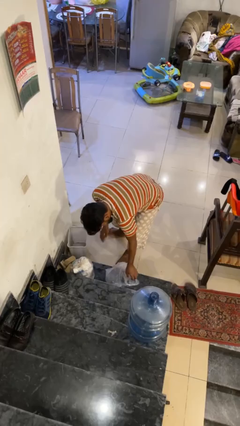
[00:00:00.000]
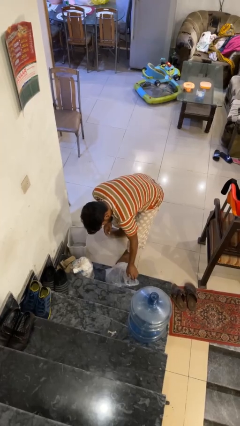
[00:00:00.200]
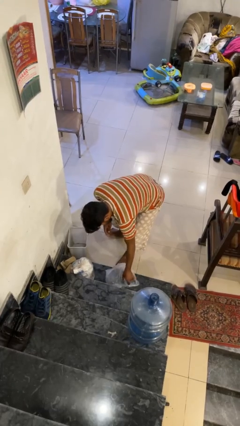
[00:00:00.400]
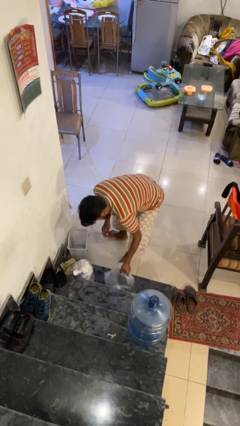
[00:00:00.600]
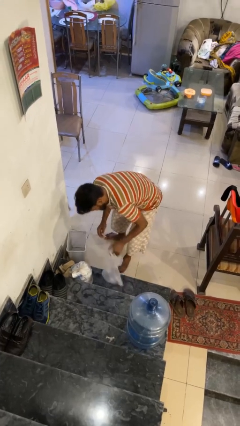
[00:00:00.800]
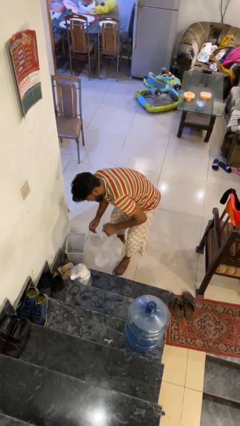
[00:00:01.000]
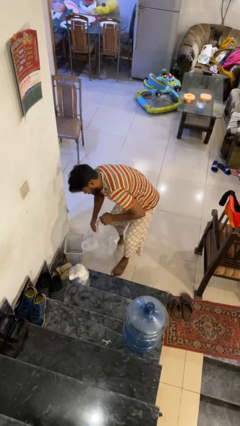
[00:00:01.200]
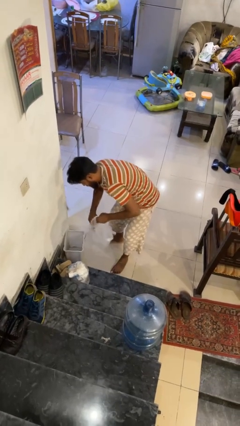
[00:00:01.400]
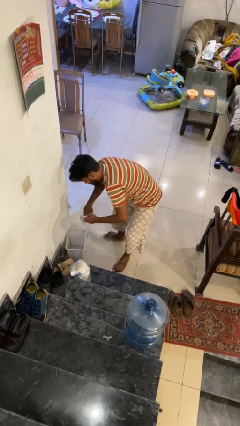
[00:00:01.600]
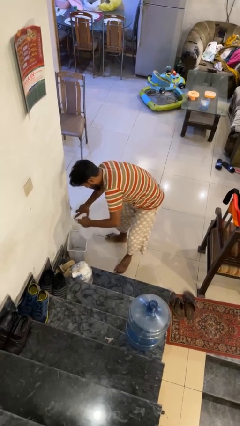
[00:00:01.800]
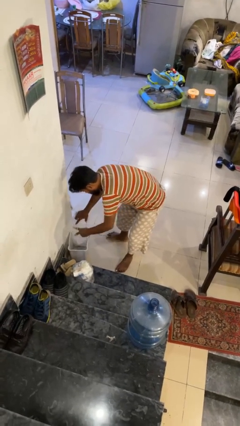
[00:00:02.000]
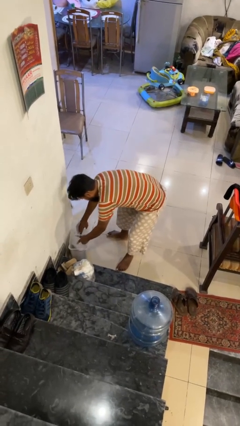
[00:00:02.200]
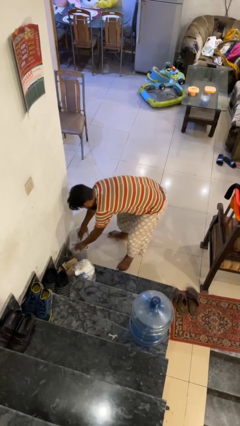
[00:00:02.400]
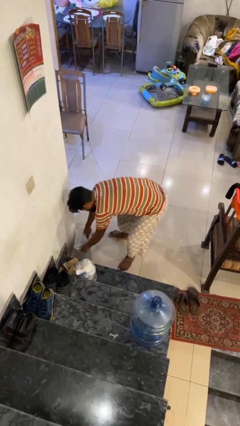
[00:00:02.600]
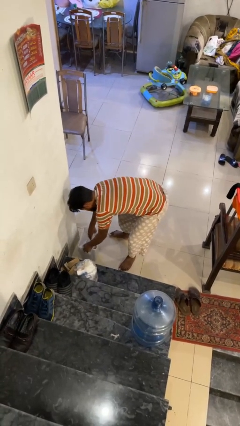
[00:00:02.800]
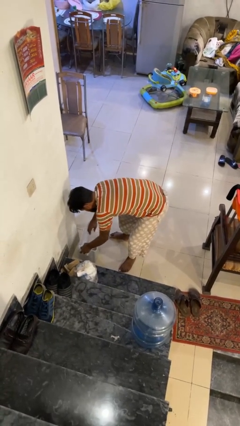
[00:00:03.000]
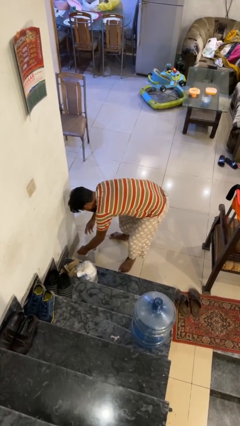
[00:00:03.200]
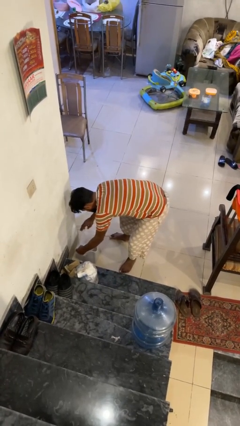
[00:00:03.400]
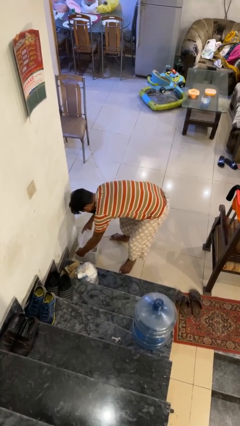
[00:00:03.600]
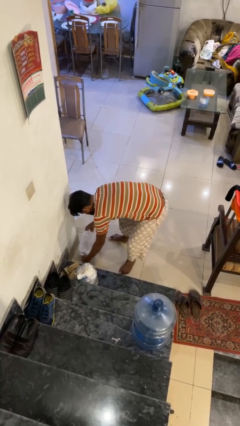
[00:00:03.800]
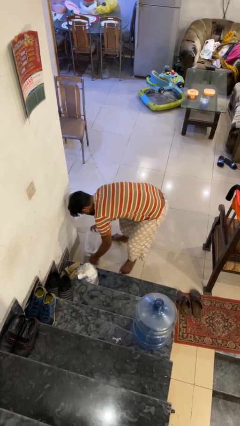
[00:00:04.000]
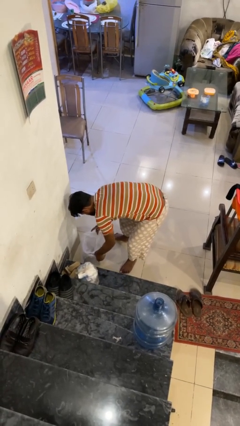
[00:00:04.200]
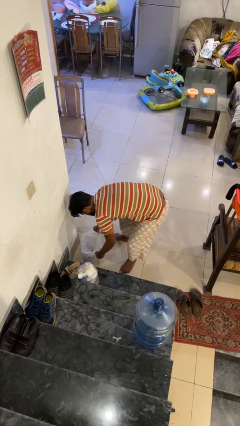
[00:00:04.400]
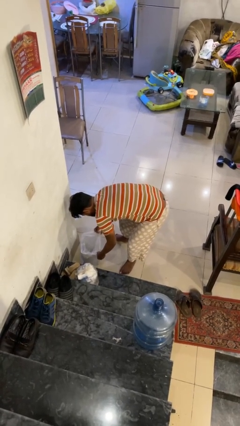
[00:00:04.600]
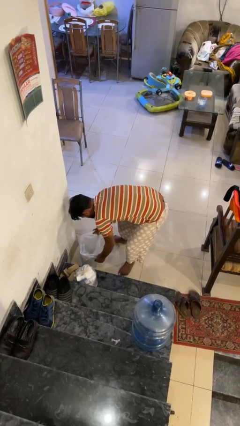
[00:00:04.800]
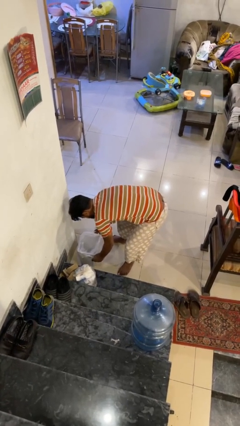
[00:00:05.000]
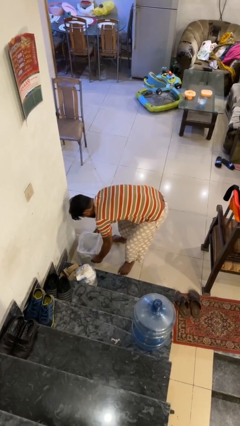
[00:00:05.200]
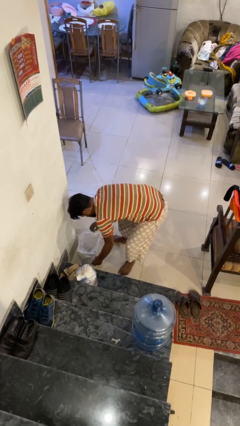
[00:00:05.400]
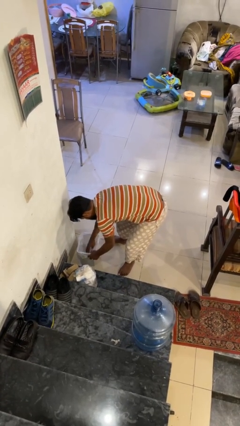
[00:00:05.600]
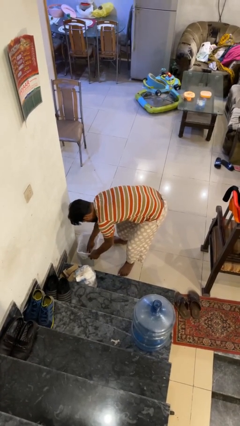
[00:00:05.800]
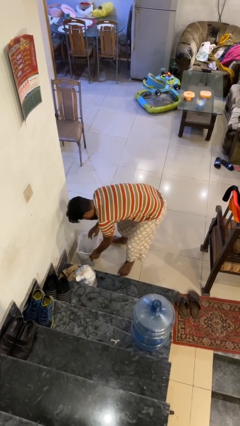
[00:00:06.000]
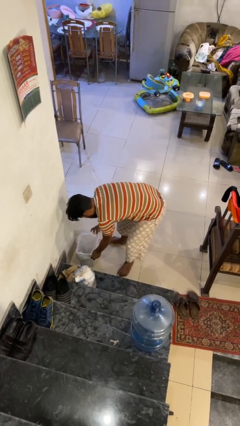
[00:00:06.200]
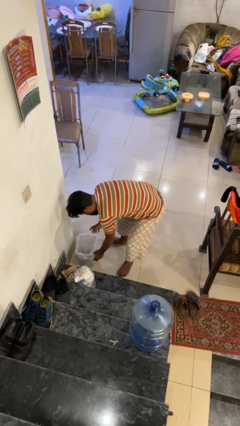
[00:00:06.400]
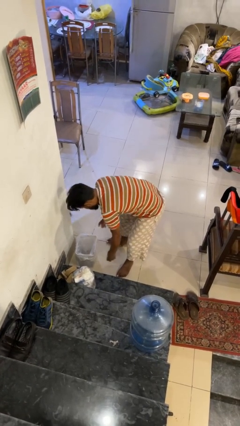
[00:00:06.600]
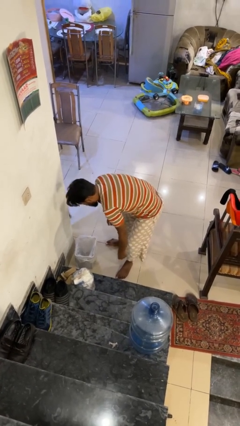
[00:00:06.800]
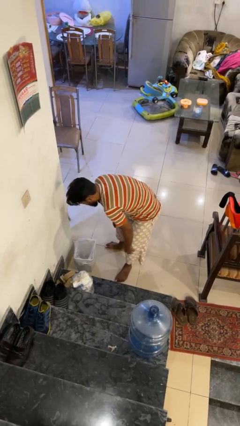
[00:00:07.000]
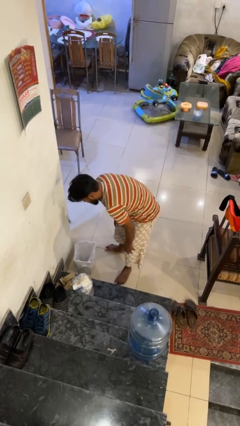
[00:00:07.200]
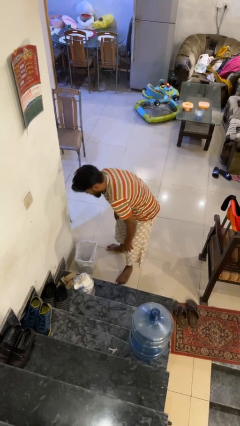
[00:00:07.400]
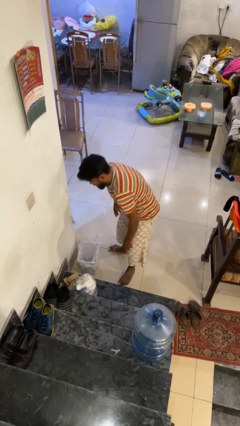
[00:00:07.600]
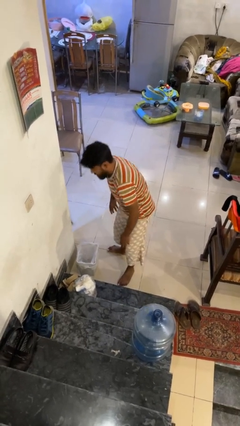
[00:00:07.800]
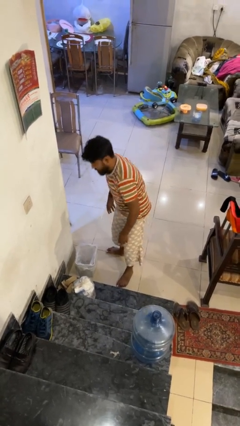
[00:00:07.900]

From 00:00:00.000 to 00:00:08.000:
person inserts trashbag into trashcan

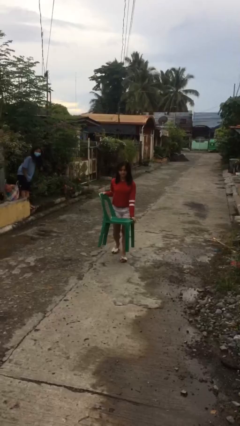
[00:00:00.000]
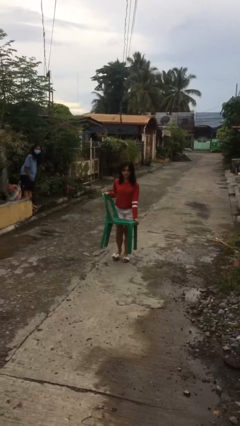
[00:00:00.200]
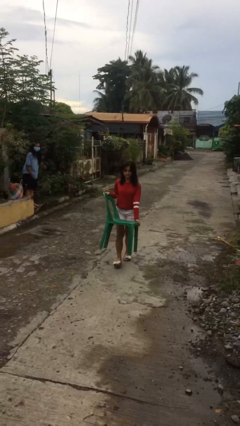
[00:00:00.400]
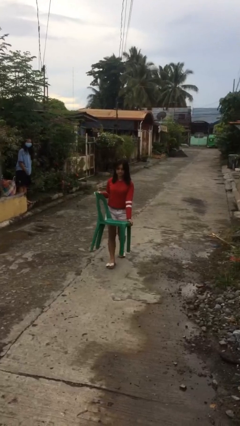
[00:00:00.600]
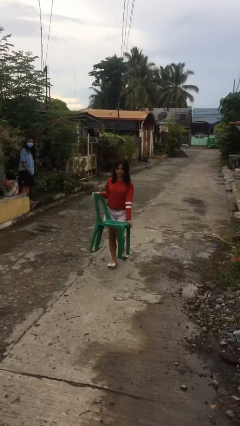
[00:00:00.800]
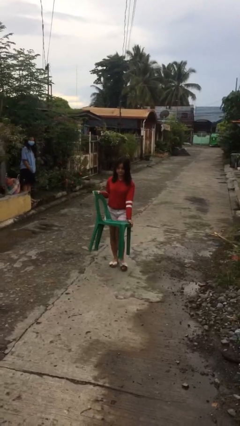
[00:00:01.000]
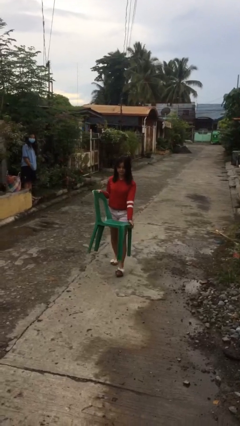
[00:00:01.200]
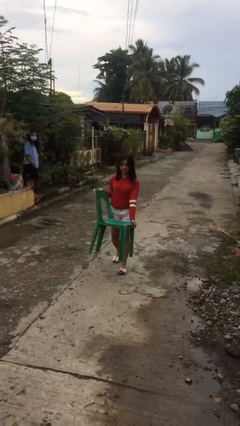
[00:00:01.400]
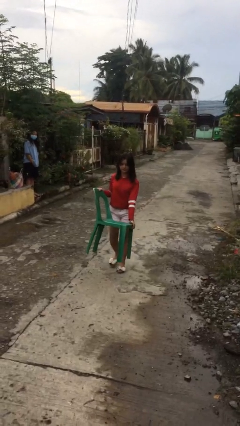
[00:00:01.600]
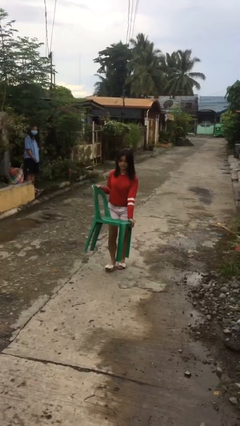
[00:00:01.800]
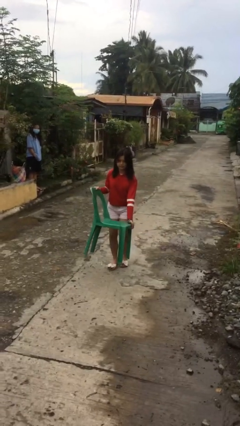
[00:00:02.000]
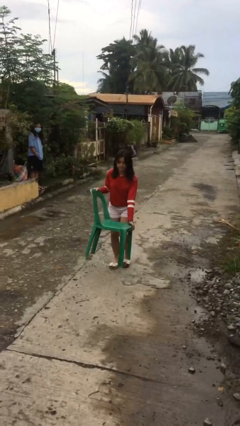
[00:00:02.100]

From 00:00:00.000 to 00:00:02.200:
person carries heavy object

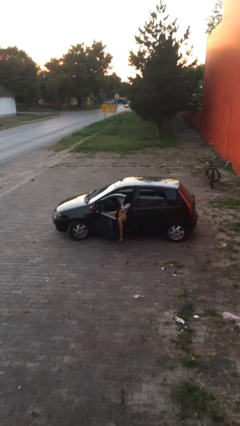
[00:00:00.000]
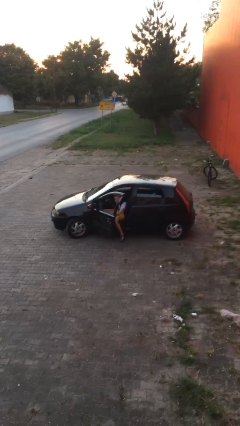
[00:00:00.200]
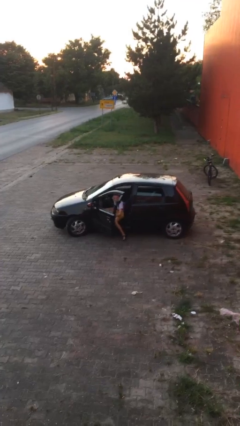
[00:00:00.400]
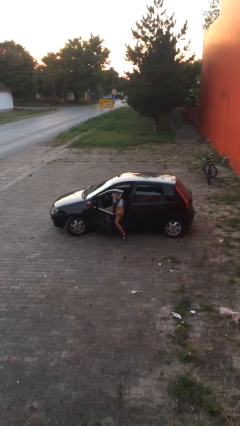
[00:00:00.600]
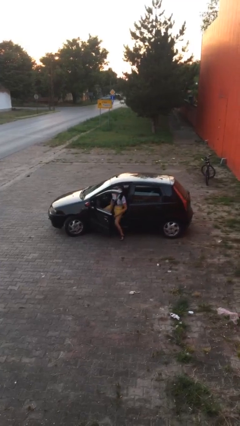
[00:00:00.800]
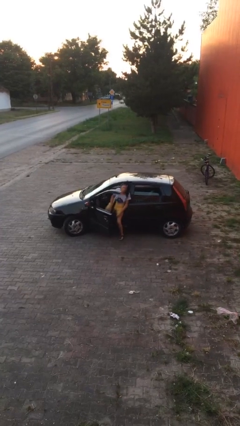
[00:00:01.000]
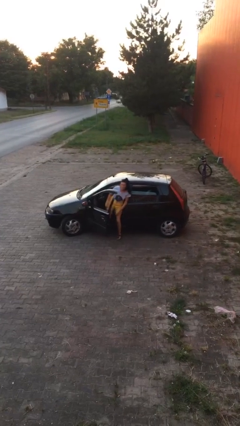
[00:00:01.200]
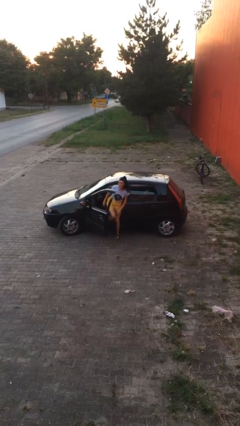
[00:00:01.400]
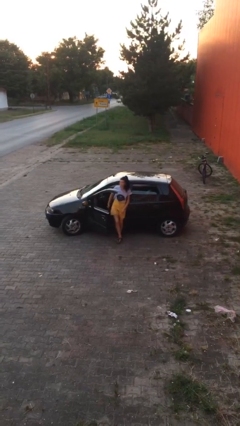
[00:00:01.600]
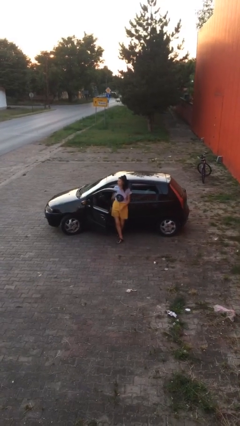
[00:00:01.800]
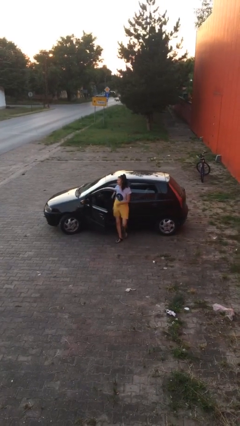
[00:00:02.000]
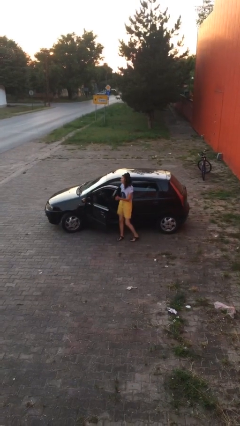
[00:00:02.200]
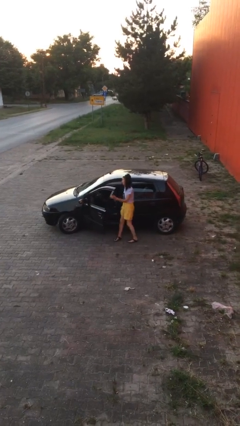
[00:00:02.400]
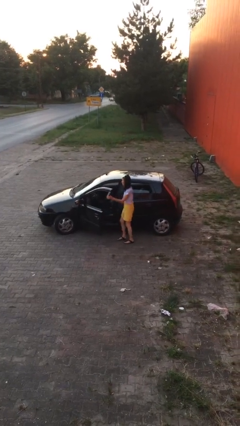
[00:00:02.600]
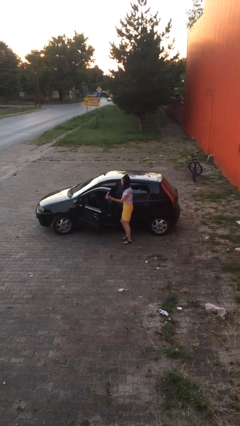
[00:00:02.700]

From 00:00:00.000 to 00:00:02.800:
person exits car

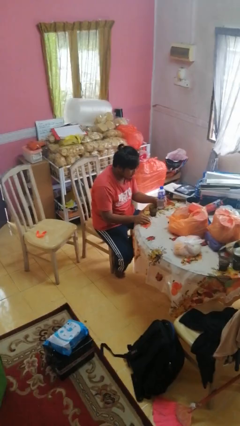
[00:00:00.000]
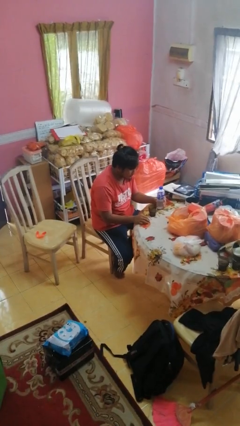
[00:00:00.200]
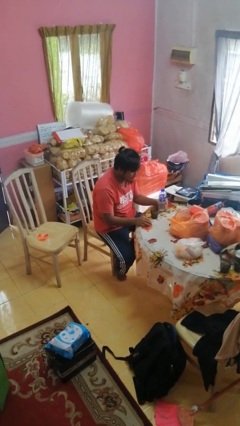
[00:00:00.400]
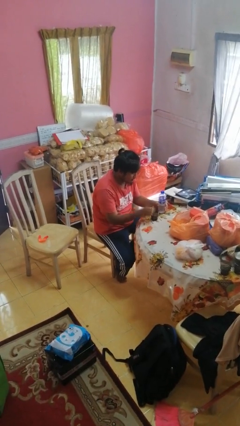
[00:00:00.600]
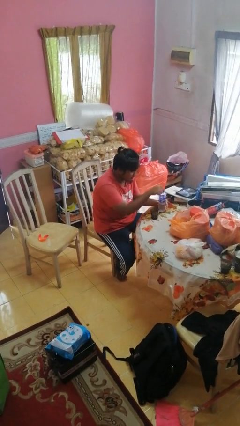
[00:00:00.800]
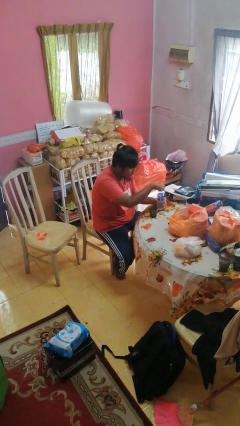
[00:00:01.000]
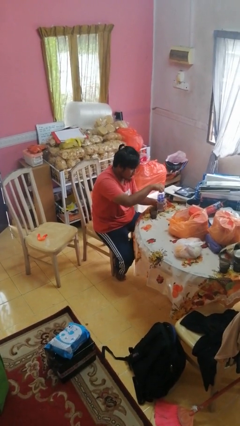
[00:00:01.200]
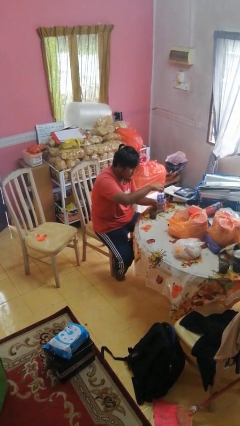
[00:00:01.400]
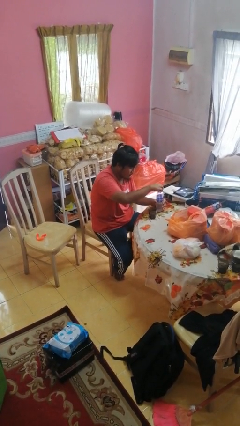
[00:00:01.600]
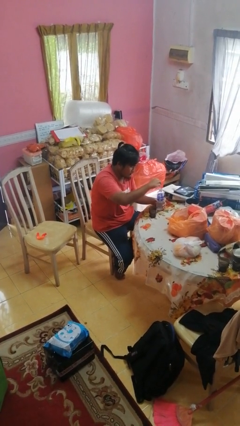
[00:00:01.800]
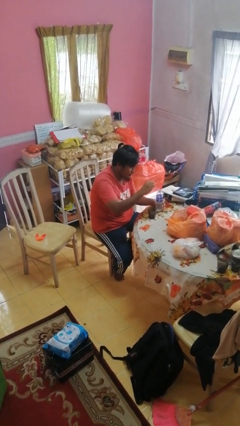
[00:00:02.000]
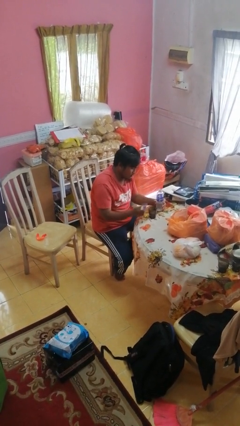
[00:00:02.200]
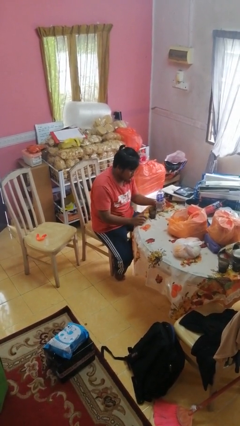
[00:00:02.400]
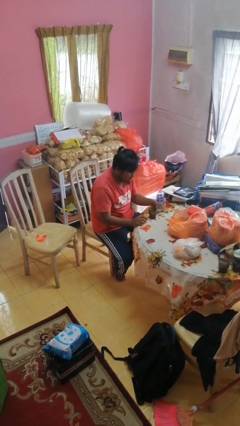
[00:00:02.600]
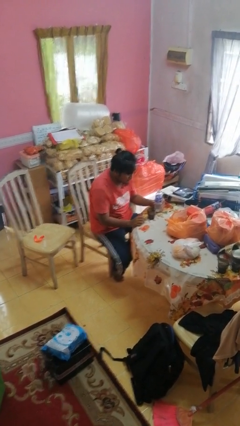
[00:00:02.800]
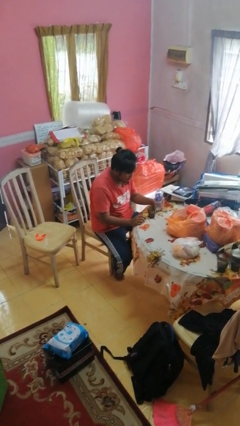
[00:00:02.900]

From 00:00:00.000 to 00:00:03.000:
person unscrews lid from bottle

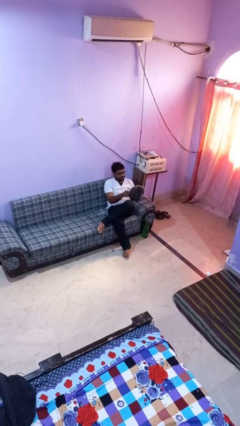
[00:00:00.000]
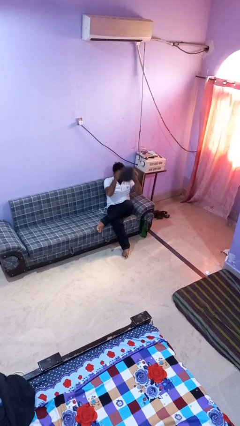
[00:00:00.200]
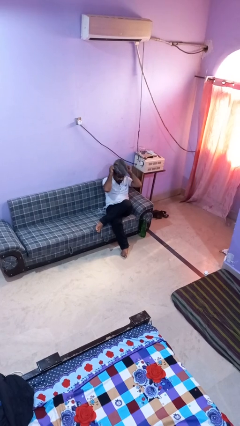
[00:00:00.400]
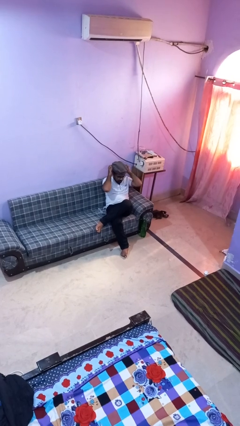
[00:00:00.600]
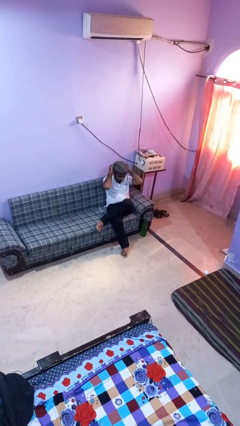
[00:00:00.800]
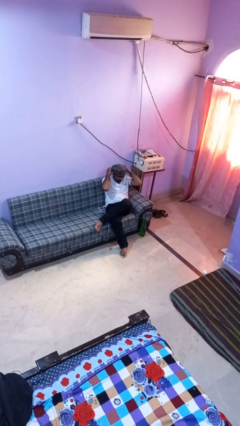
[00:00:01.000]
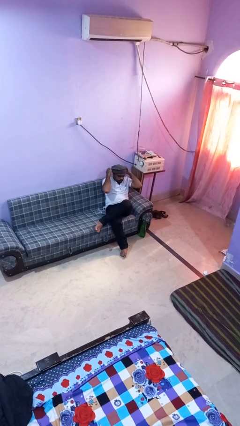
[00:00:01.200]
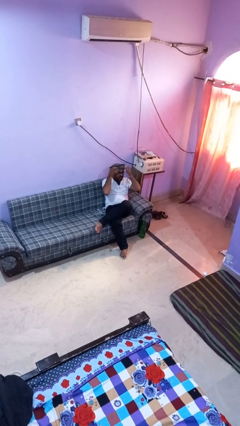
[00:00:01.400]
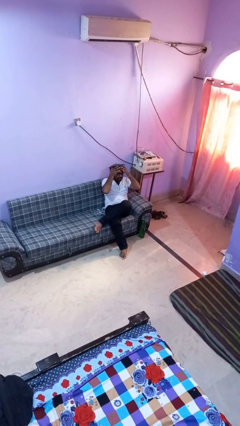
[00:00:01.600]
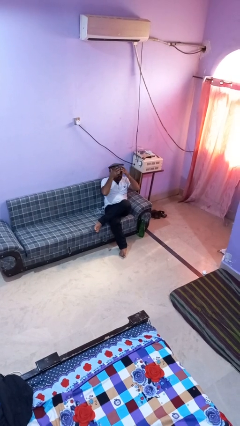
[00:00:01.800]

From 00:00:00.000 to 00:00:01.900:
person puts on hat
